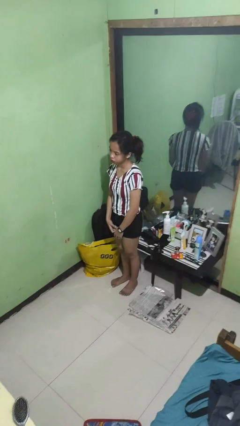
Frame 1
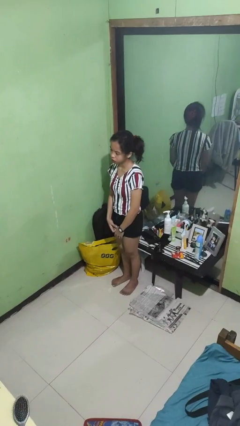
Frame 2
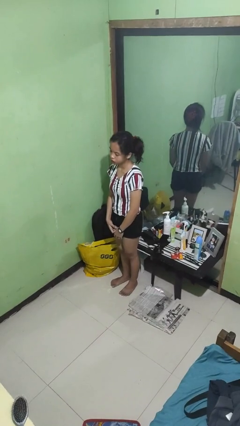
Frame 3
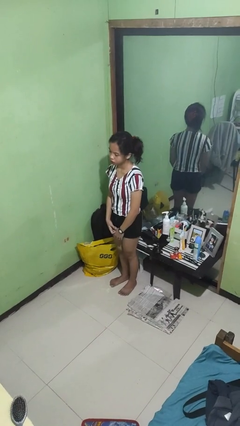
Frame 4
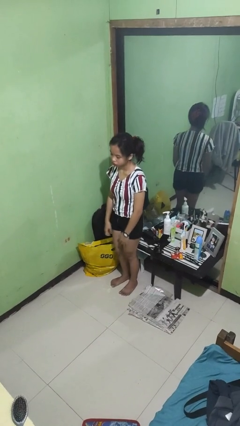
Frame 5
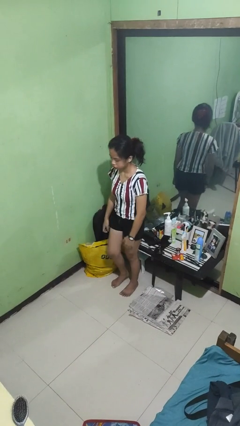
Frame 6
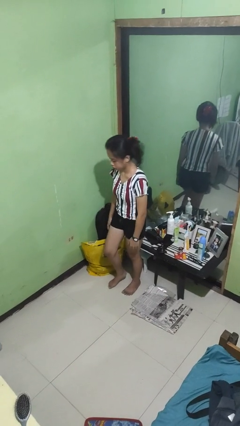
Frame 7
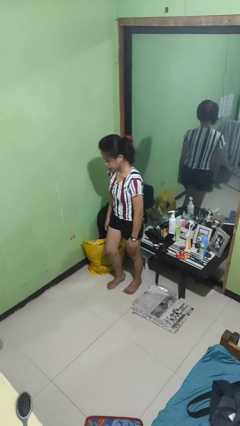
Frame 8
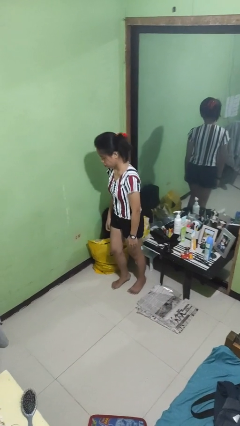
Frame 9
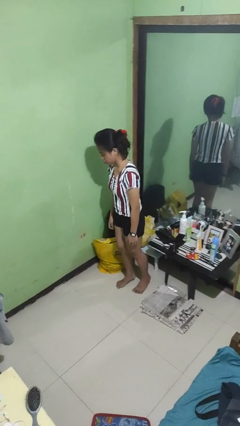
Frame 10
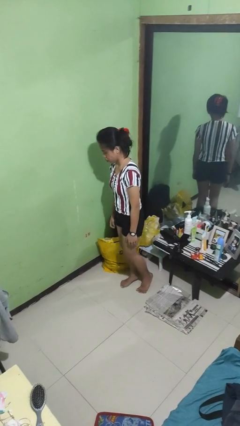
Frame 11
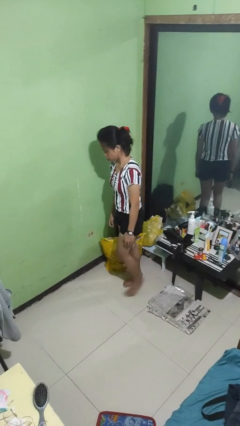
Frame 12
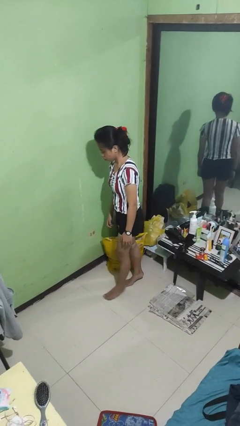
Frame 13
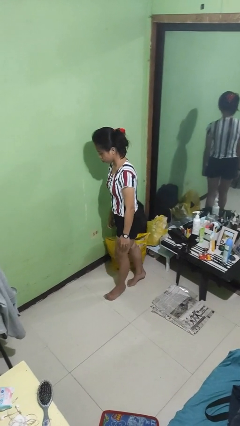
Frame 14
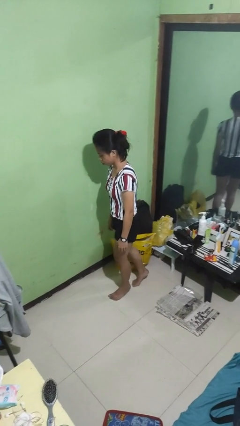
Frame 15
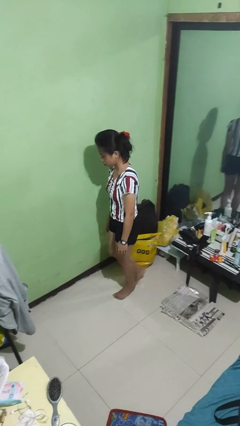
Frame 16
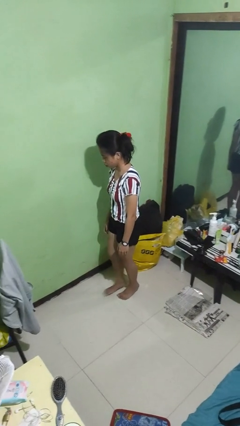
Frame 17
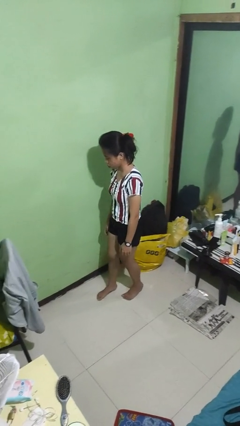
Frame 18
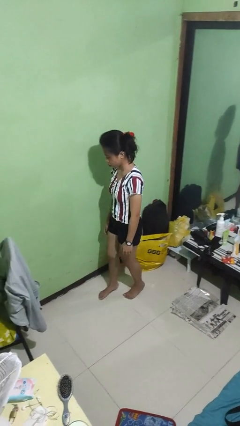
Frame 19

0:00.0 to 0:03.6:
person walks tiptoe

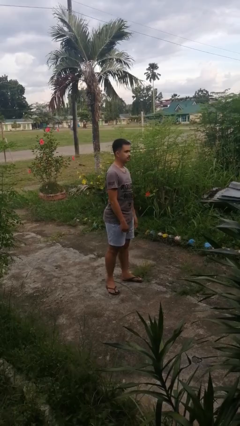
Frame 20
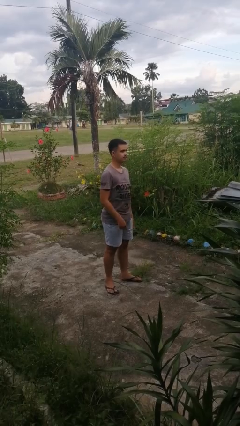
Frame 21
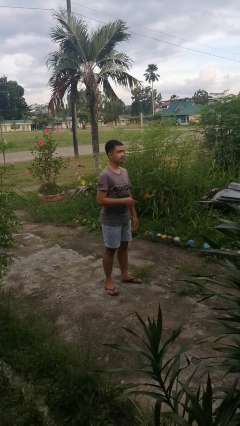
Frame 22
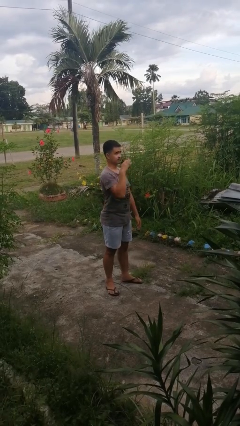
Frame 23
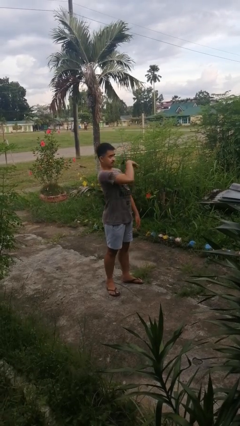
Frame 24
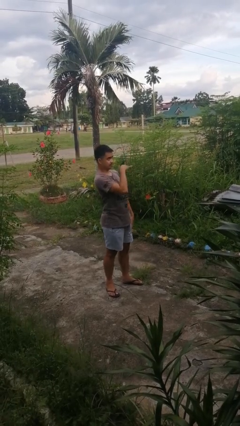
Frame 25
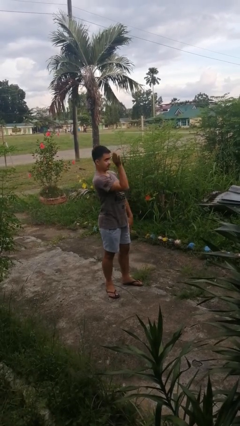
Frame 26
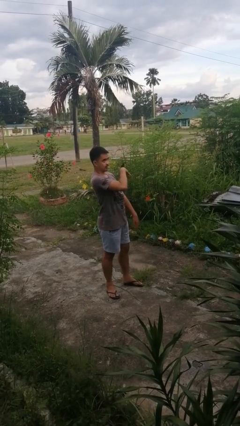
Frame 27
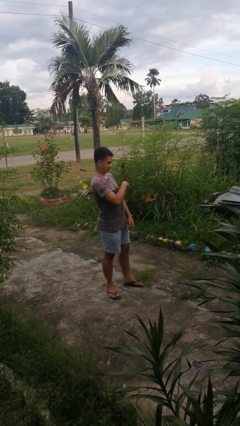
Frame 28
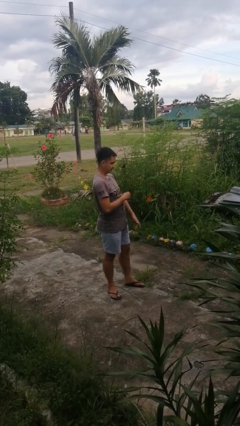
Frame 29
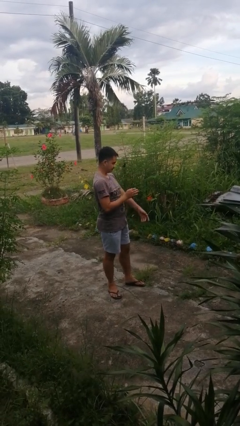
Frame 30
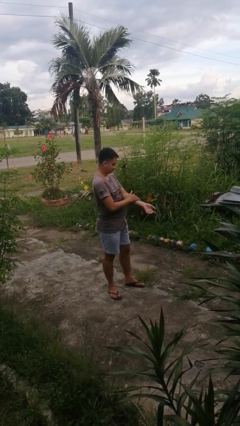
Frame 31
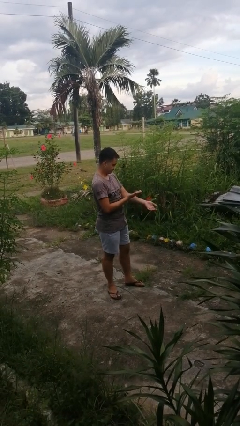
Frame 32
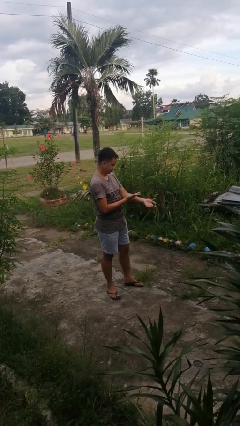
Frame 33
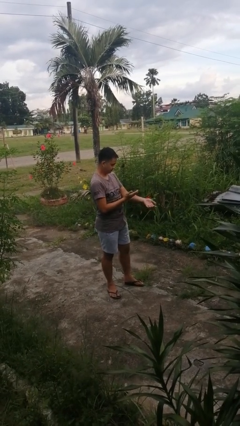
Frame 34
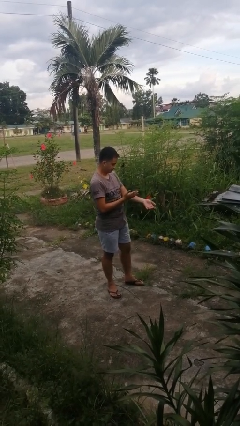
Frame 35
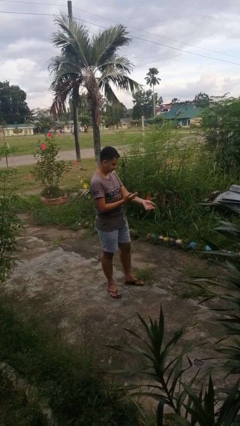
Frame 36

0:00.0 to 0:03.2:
person swats bug

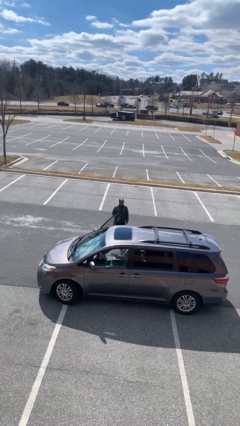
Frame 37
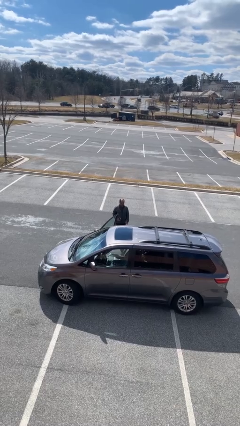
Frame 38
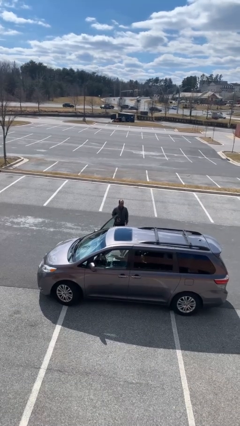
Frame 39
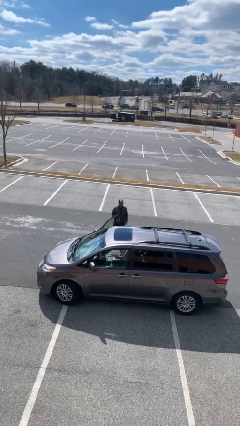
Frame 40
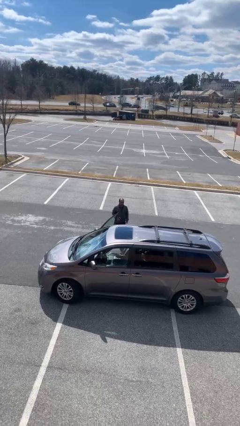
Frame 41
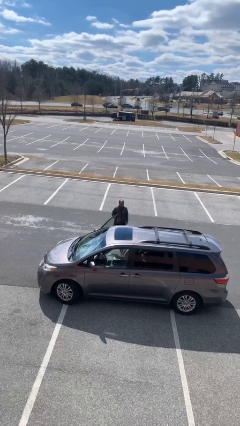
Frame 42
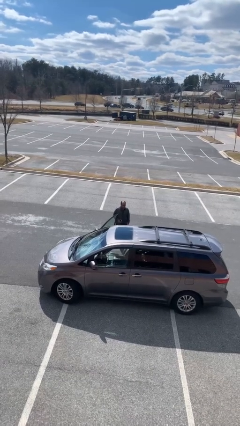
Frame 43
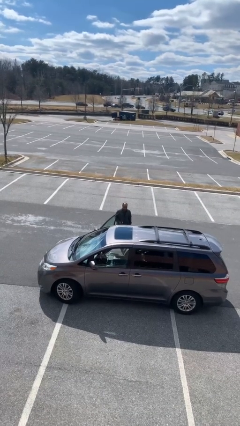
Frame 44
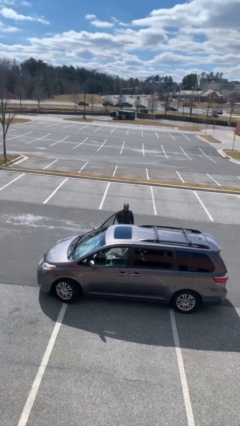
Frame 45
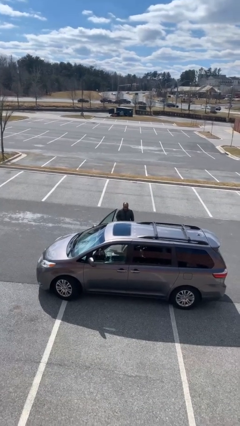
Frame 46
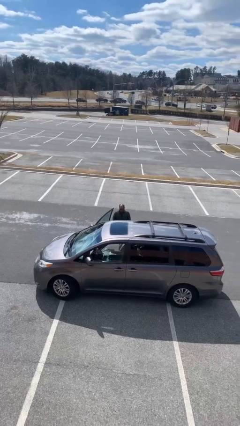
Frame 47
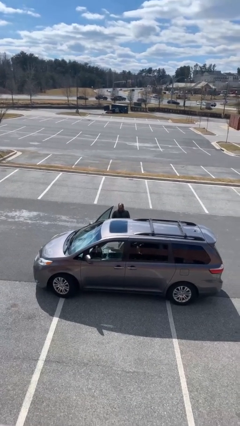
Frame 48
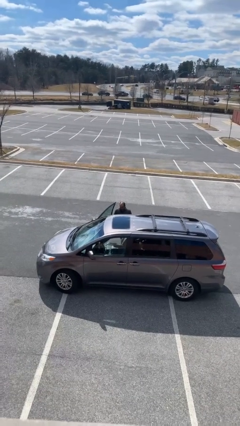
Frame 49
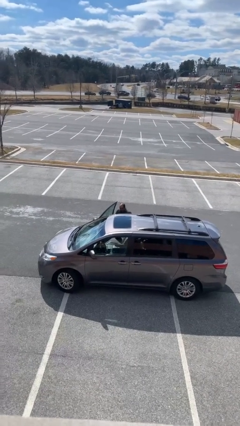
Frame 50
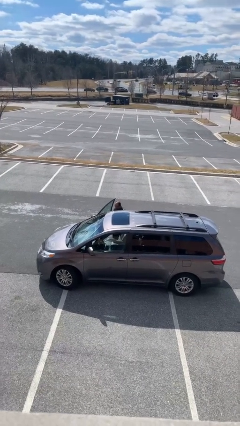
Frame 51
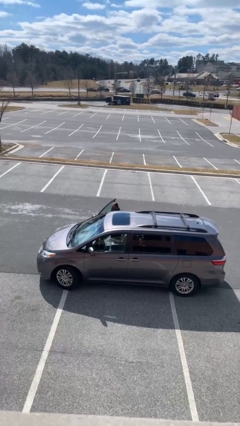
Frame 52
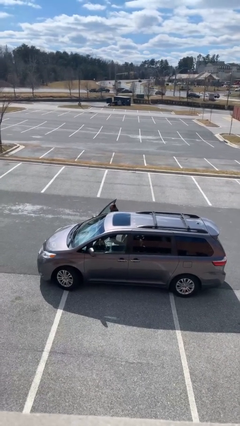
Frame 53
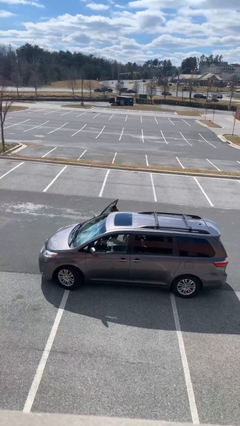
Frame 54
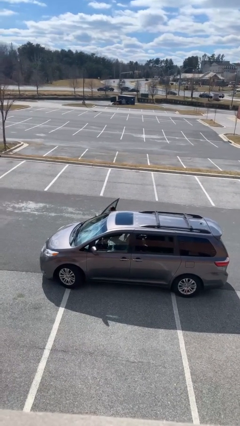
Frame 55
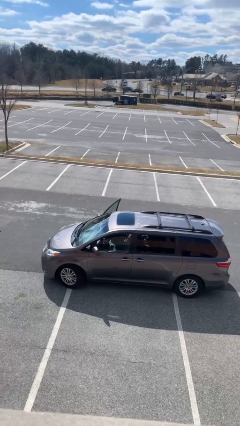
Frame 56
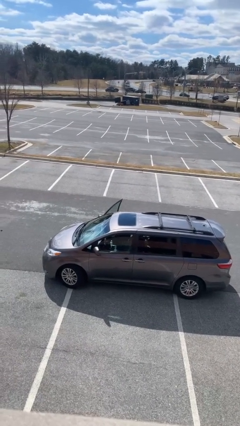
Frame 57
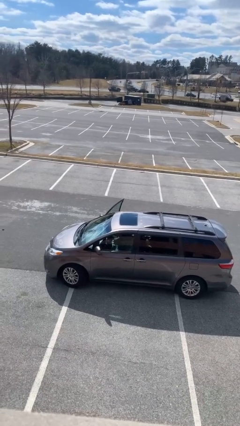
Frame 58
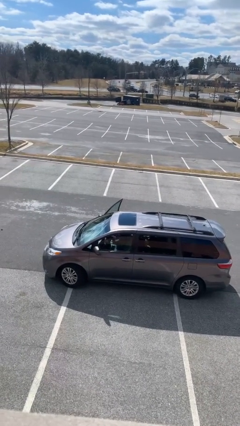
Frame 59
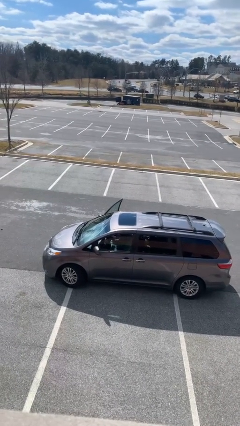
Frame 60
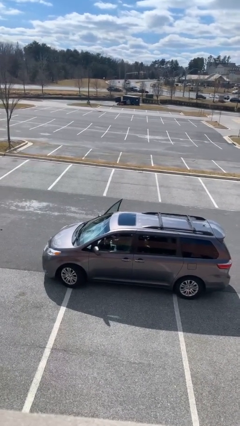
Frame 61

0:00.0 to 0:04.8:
person enters car

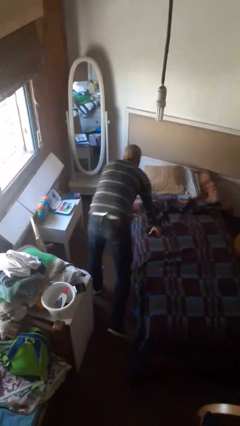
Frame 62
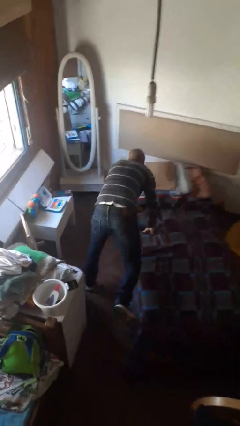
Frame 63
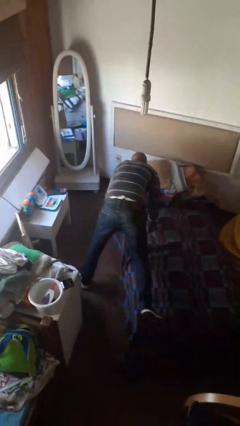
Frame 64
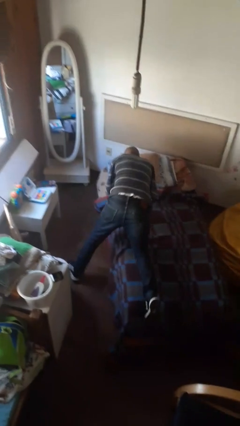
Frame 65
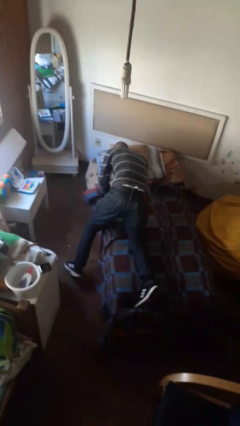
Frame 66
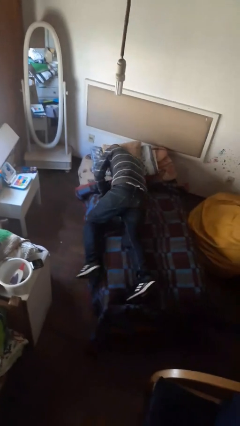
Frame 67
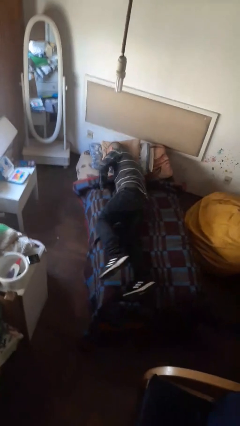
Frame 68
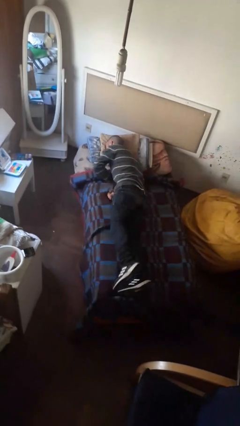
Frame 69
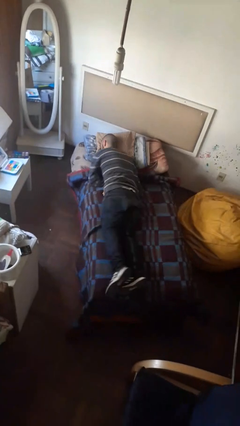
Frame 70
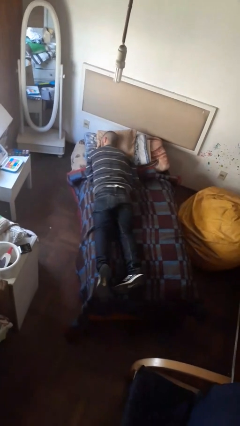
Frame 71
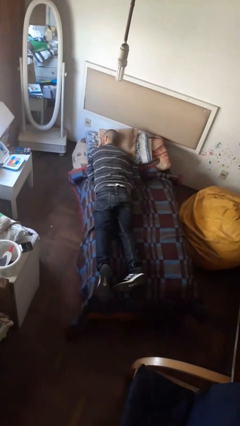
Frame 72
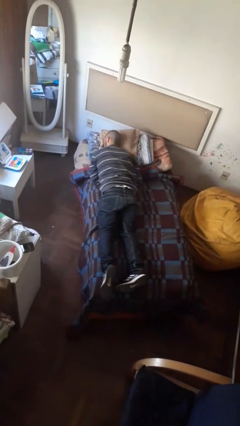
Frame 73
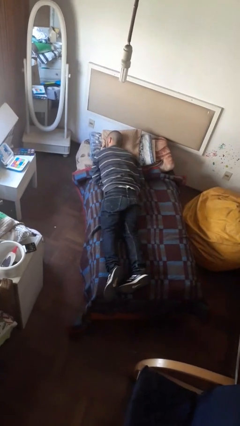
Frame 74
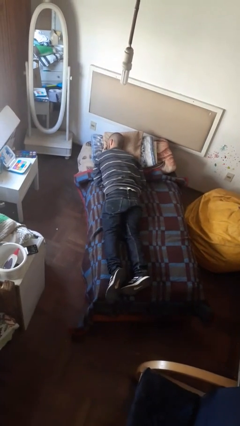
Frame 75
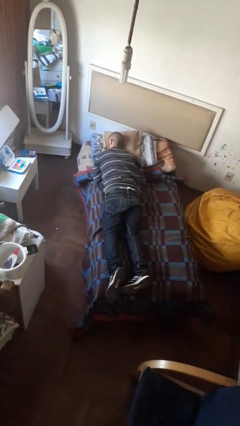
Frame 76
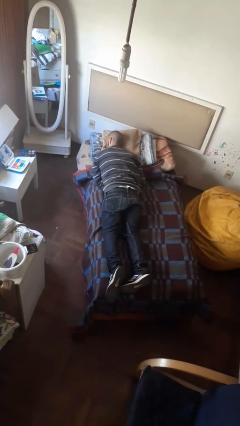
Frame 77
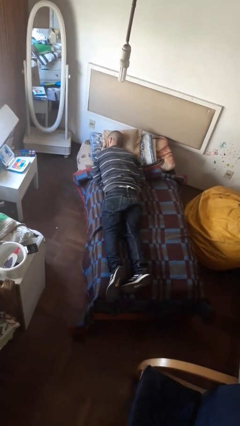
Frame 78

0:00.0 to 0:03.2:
person lies down on bed

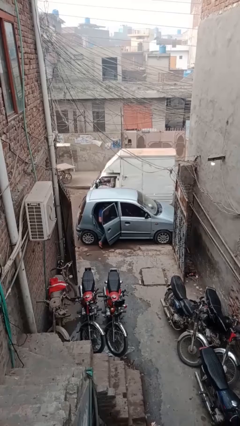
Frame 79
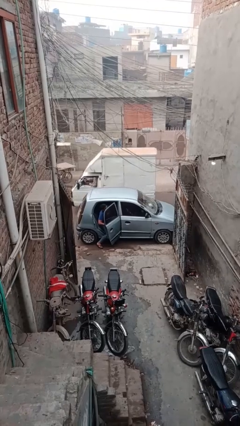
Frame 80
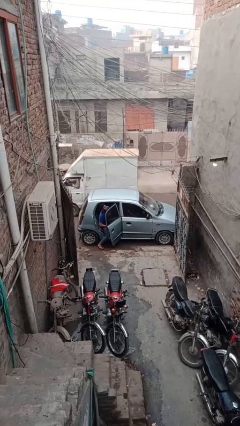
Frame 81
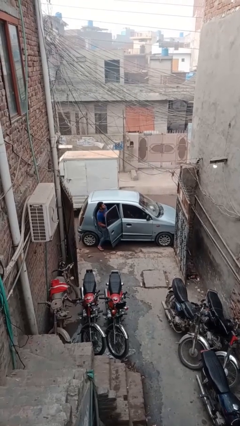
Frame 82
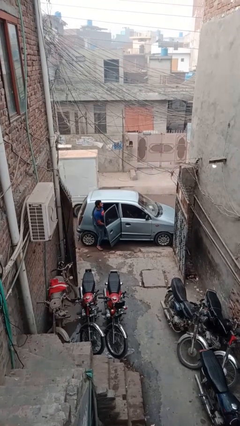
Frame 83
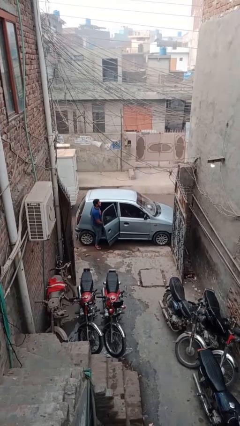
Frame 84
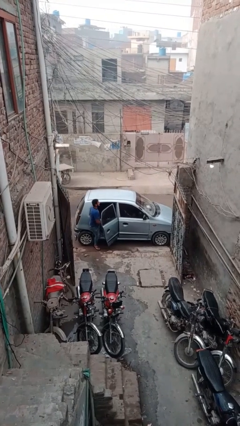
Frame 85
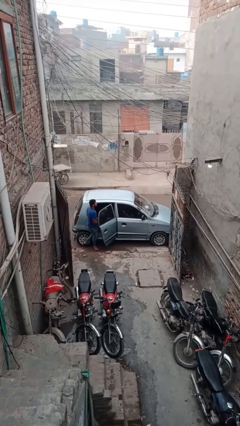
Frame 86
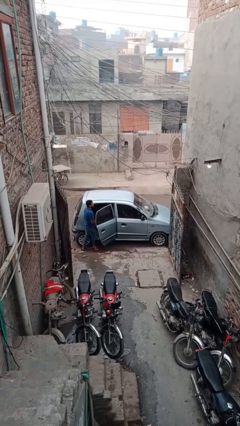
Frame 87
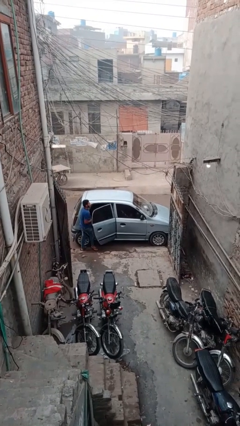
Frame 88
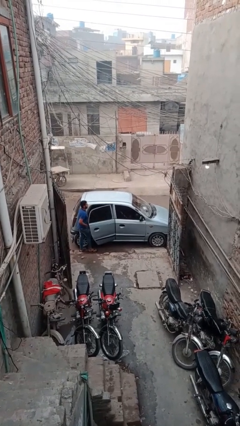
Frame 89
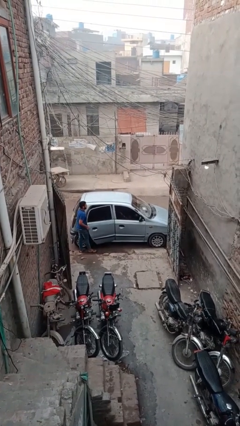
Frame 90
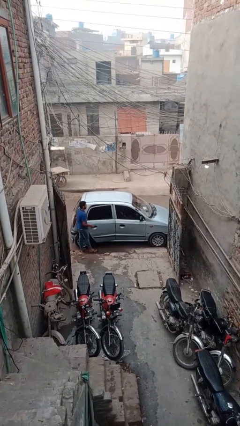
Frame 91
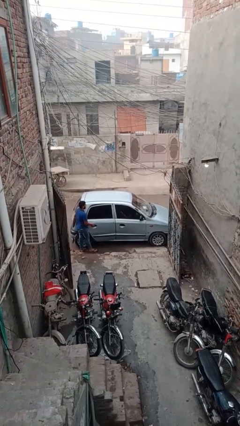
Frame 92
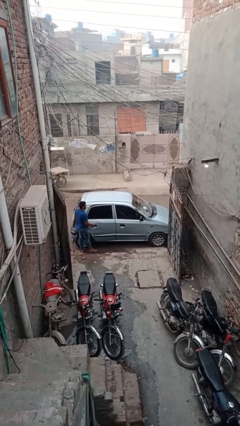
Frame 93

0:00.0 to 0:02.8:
car drops off person

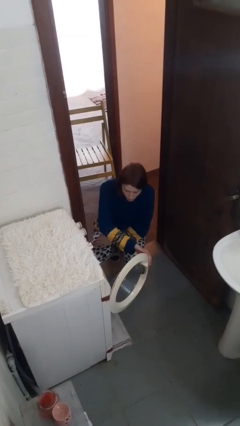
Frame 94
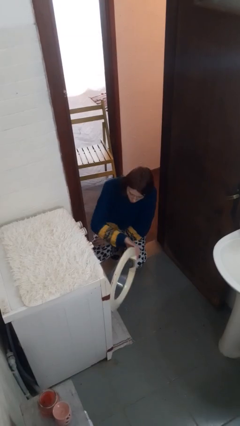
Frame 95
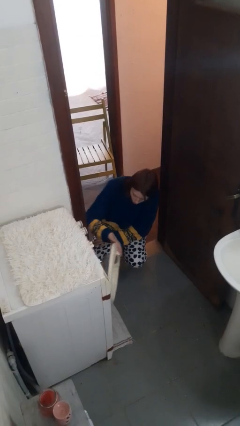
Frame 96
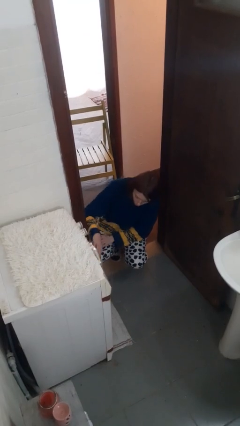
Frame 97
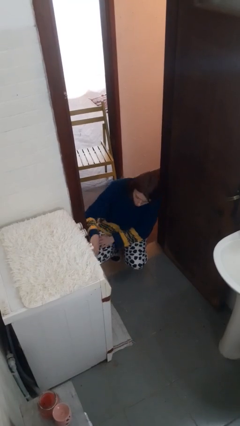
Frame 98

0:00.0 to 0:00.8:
person closes clothes washer
